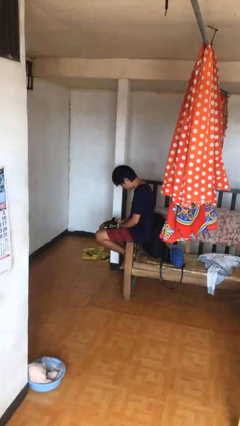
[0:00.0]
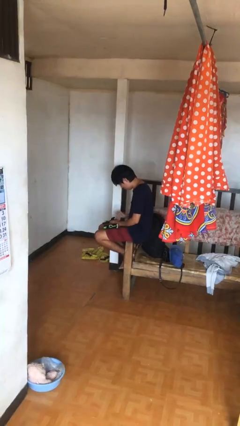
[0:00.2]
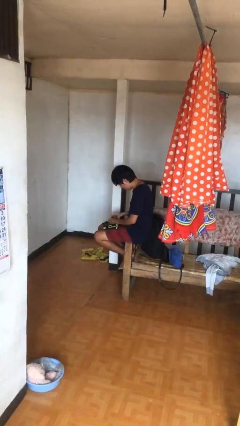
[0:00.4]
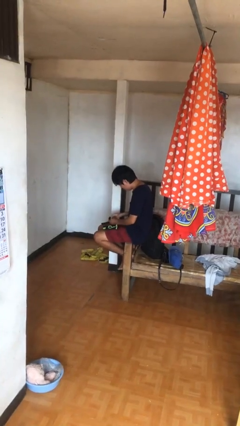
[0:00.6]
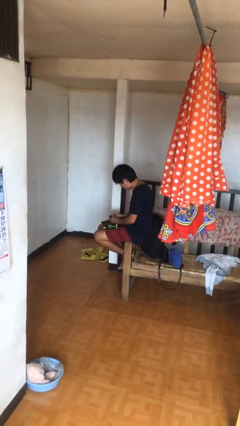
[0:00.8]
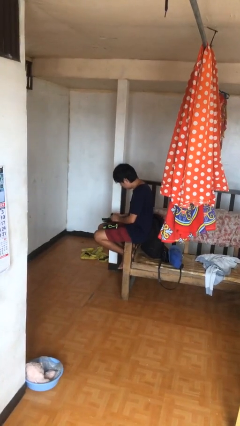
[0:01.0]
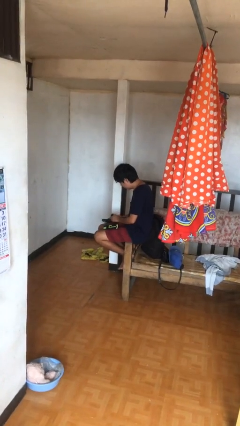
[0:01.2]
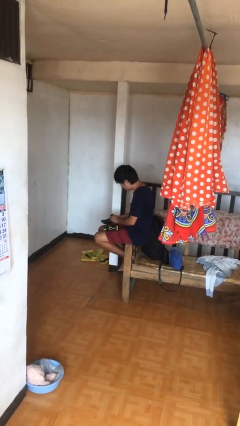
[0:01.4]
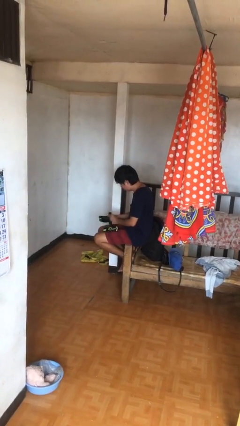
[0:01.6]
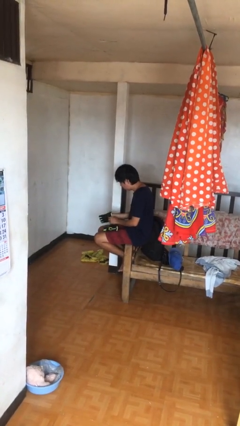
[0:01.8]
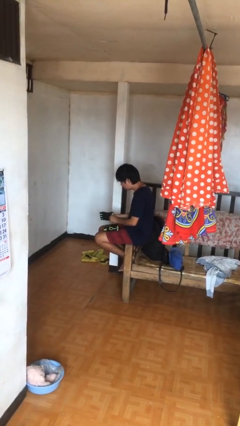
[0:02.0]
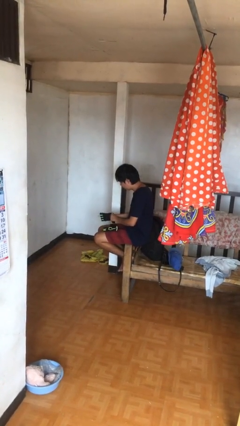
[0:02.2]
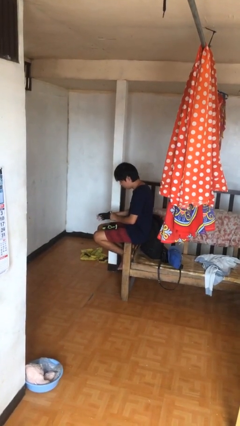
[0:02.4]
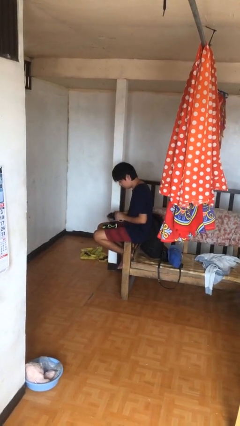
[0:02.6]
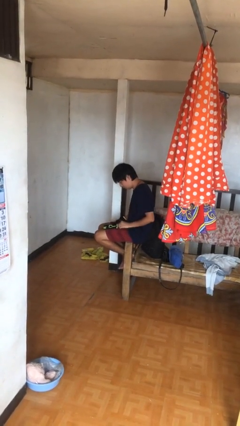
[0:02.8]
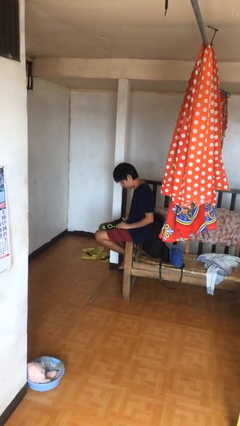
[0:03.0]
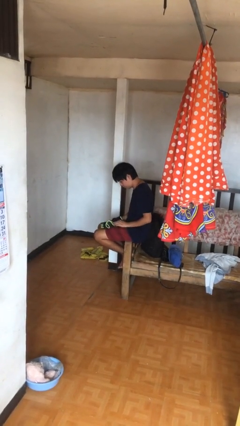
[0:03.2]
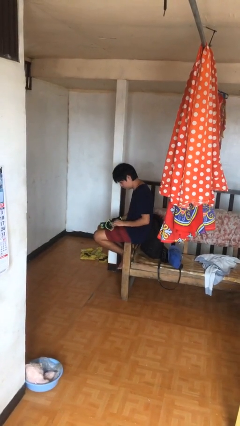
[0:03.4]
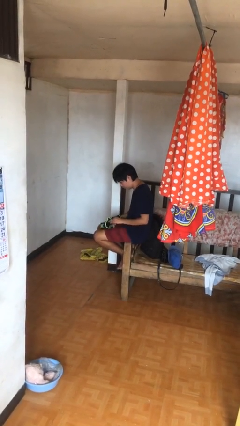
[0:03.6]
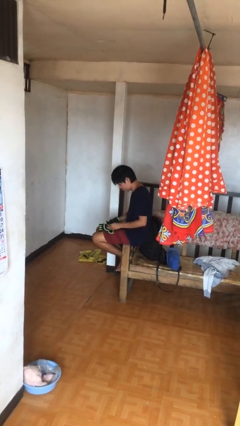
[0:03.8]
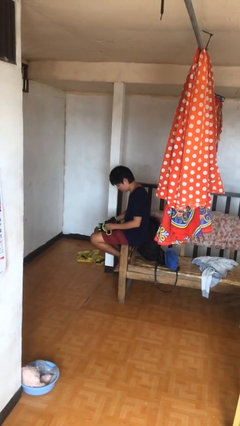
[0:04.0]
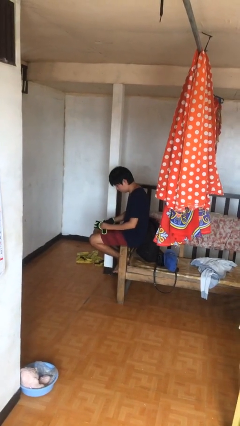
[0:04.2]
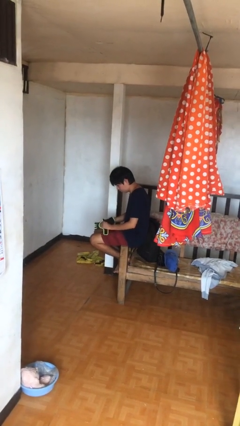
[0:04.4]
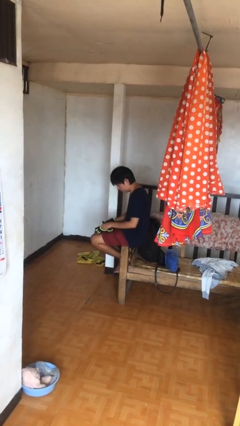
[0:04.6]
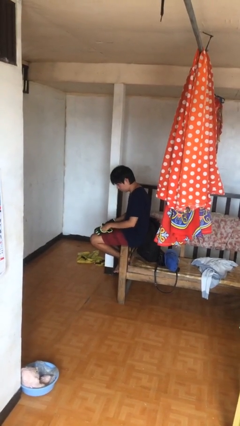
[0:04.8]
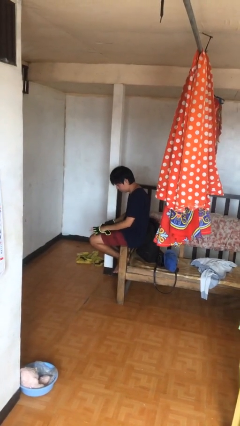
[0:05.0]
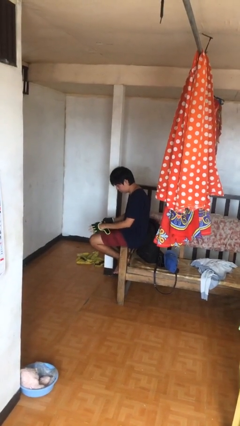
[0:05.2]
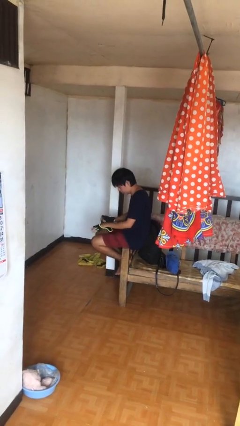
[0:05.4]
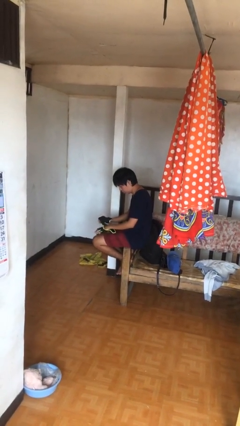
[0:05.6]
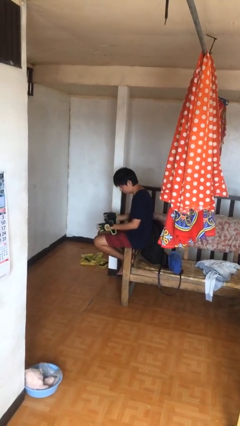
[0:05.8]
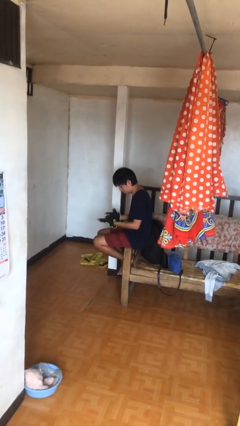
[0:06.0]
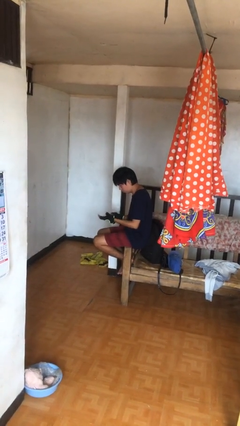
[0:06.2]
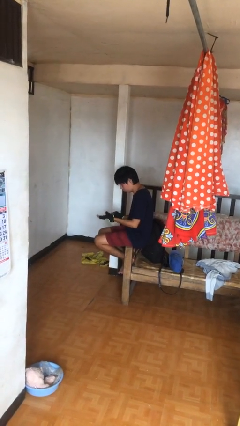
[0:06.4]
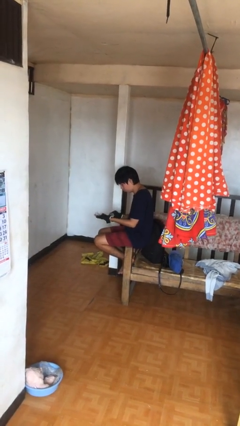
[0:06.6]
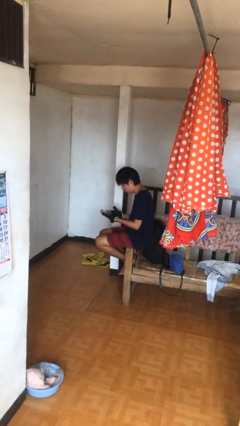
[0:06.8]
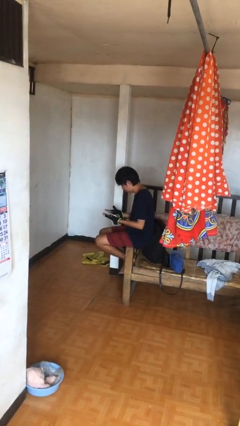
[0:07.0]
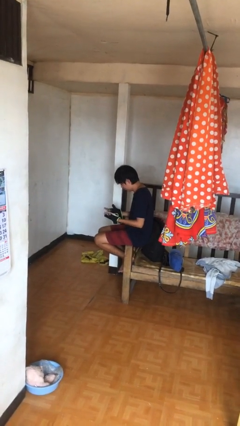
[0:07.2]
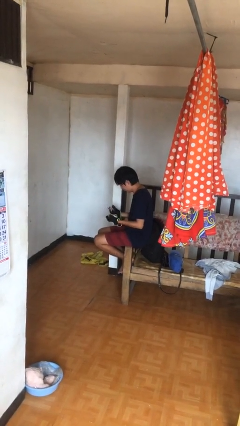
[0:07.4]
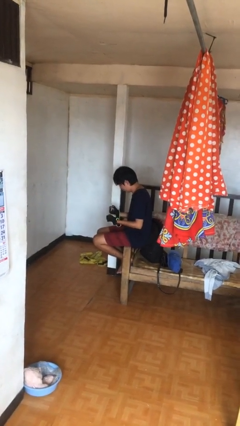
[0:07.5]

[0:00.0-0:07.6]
person puts on gloves

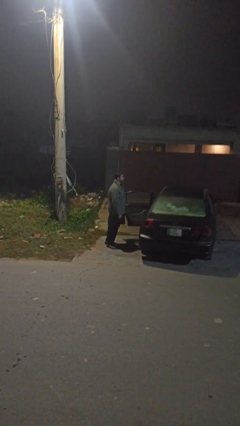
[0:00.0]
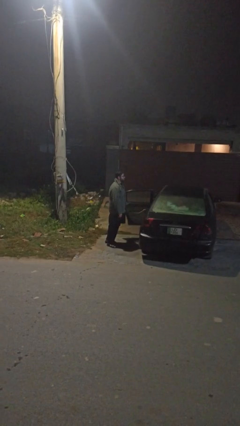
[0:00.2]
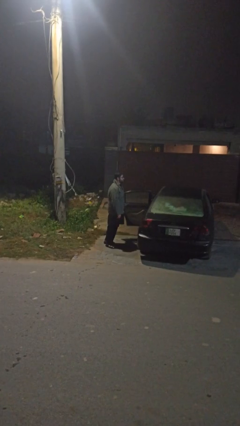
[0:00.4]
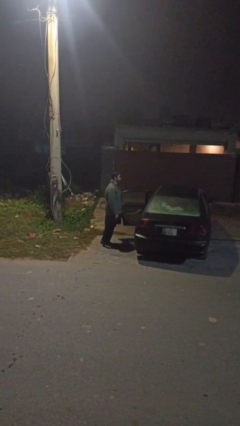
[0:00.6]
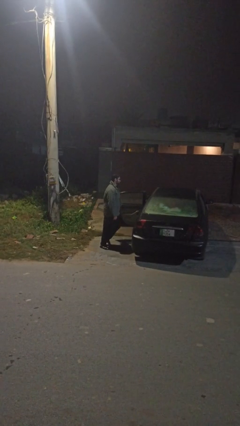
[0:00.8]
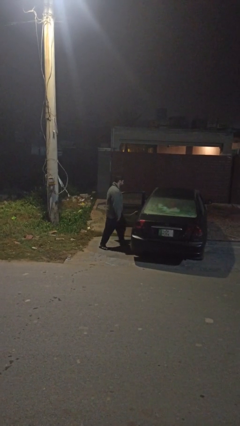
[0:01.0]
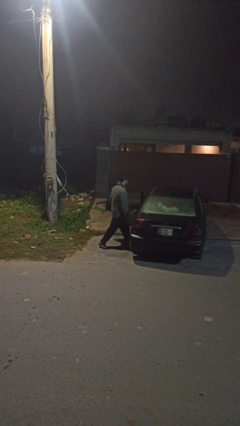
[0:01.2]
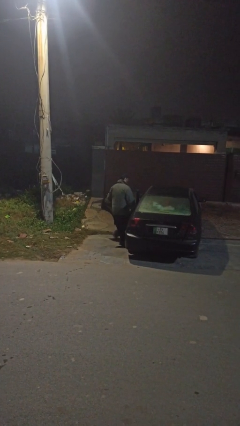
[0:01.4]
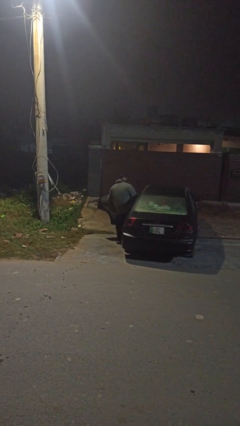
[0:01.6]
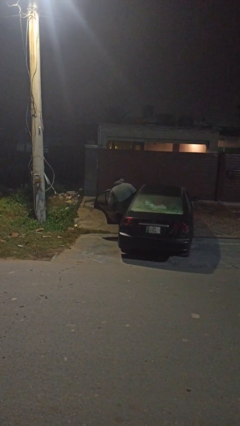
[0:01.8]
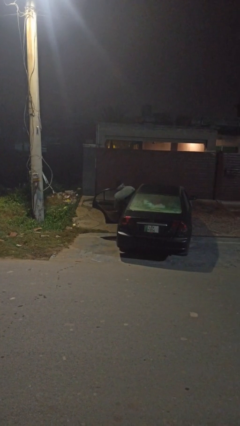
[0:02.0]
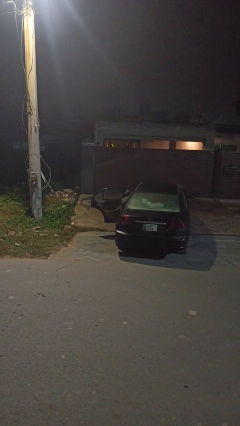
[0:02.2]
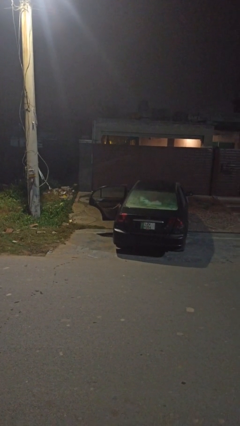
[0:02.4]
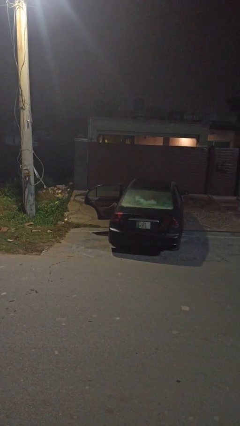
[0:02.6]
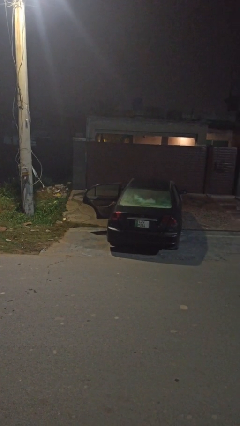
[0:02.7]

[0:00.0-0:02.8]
person enters car

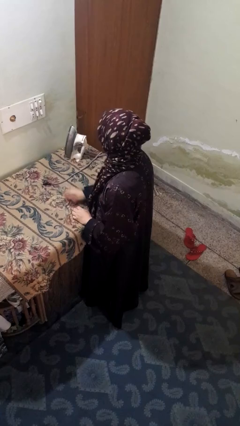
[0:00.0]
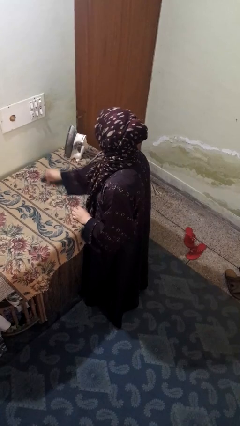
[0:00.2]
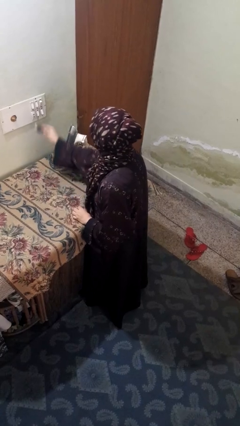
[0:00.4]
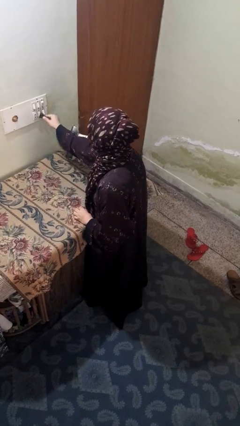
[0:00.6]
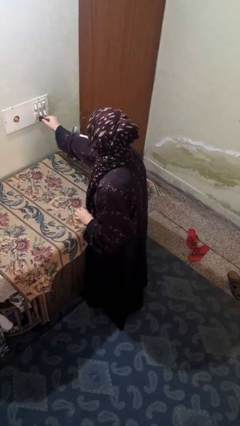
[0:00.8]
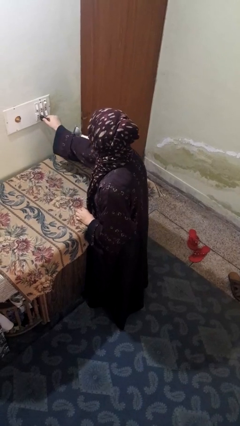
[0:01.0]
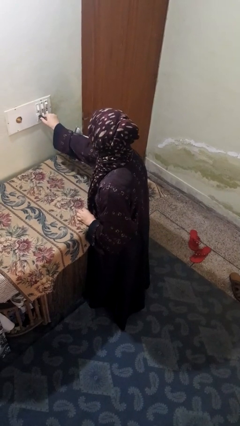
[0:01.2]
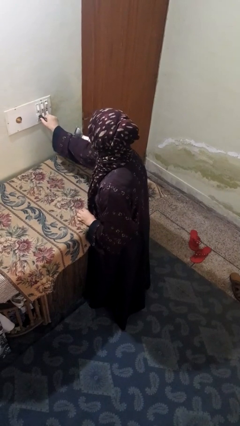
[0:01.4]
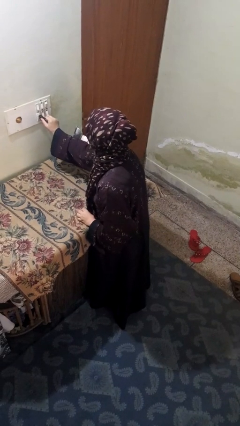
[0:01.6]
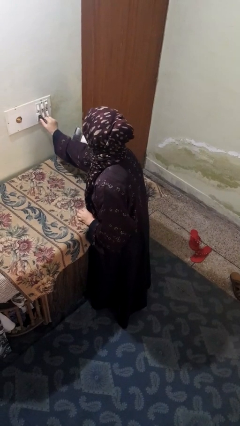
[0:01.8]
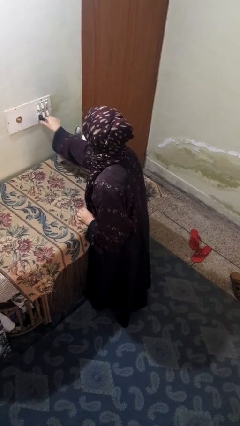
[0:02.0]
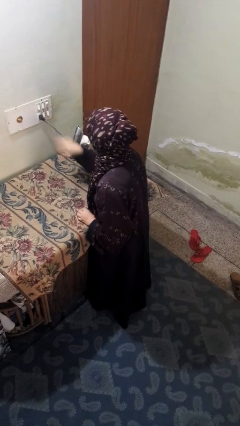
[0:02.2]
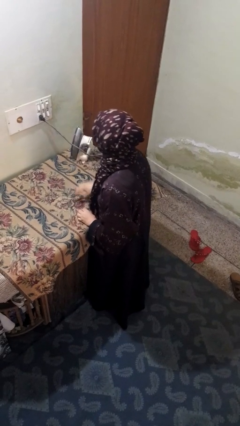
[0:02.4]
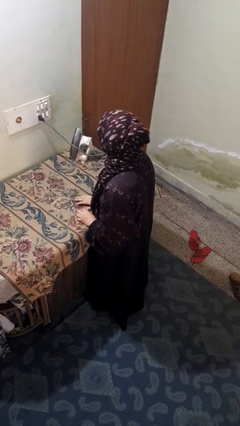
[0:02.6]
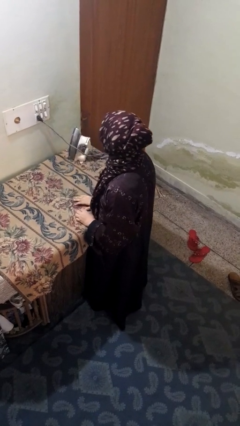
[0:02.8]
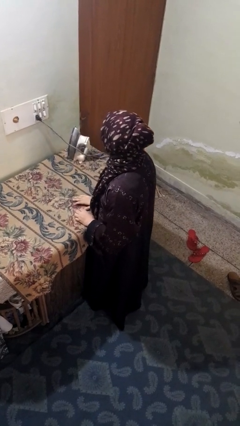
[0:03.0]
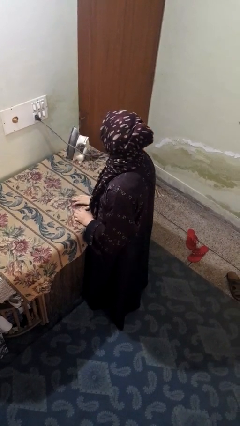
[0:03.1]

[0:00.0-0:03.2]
person plugs into electrical socket

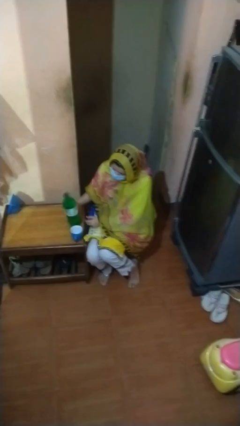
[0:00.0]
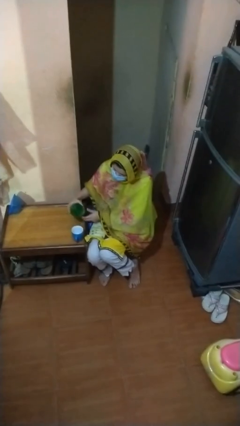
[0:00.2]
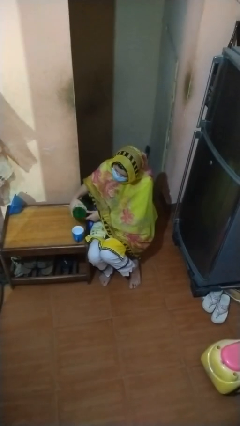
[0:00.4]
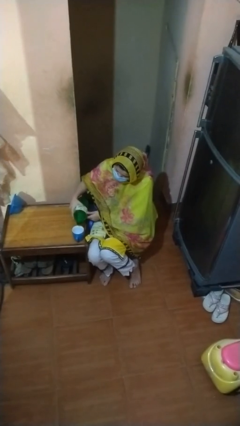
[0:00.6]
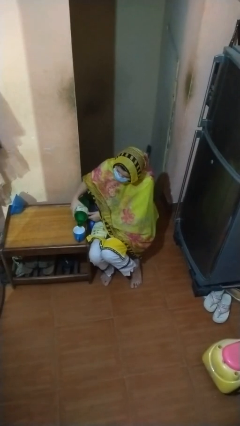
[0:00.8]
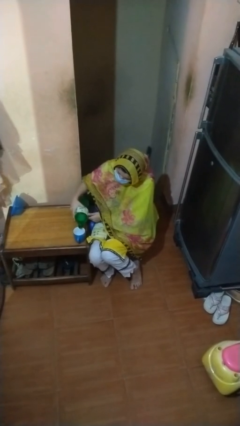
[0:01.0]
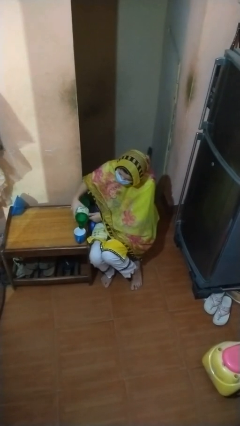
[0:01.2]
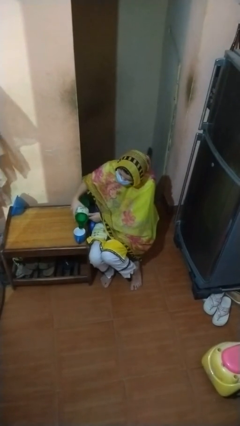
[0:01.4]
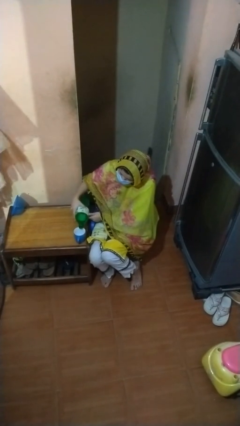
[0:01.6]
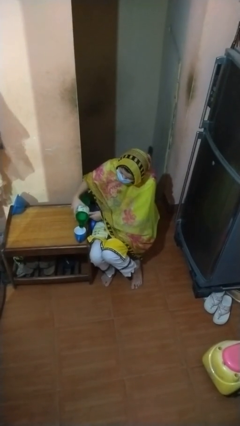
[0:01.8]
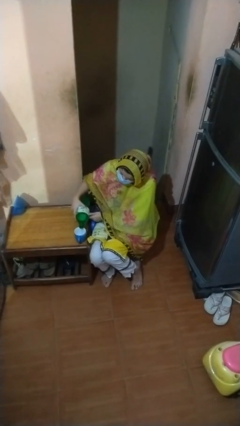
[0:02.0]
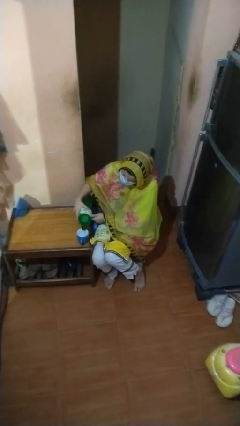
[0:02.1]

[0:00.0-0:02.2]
person pours liquid into cup

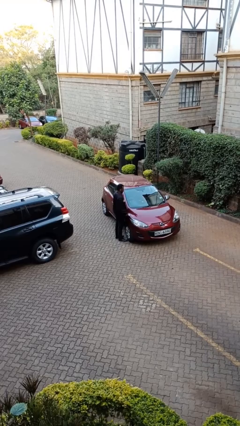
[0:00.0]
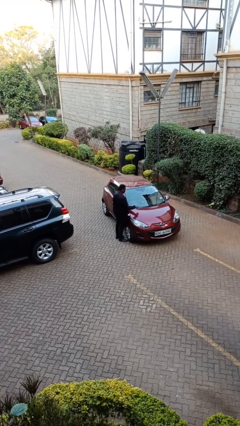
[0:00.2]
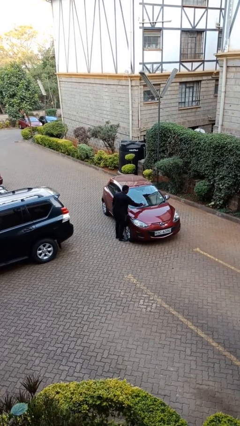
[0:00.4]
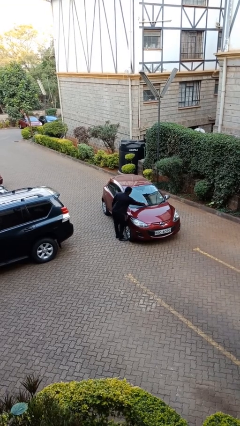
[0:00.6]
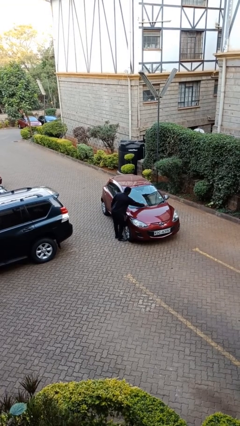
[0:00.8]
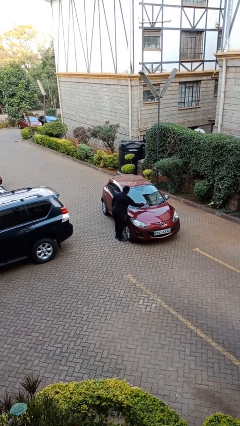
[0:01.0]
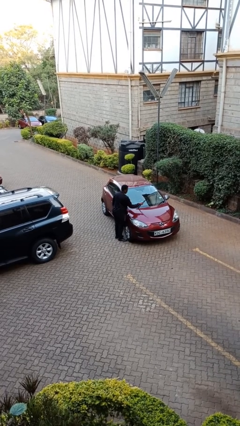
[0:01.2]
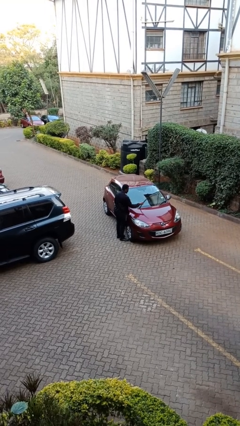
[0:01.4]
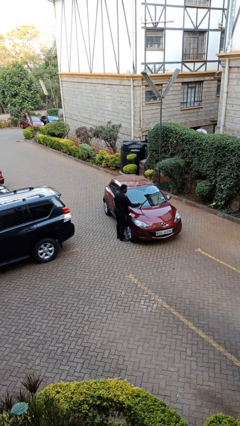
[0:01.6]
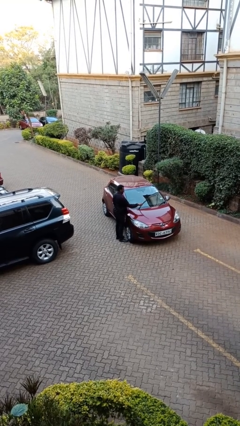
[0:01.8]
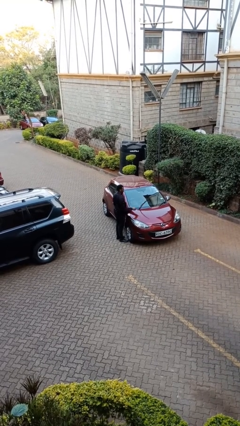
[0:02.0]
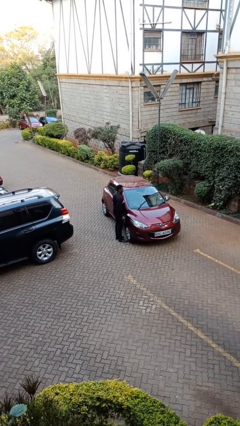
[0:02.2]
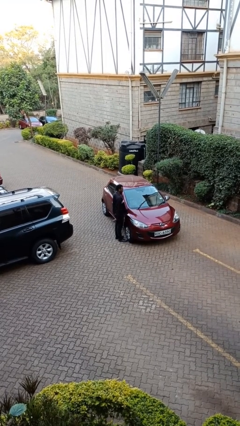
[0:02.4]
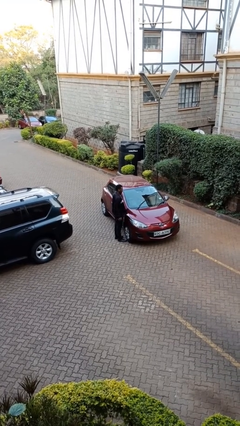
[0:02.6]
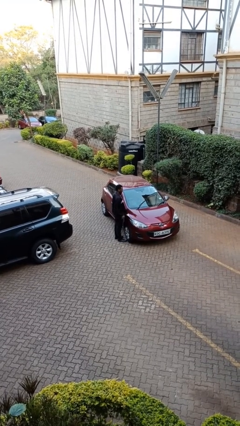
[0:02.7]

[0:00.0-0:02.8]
person flips up car wipers
